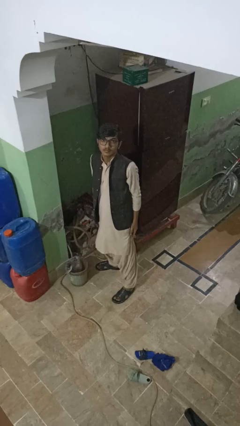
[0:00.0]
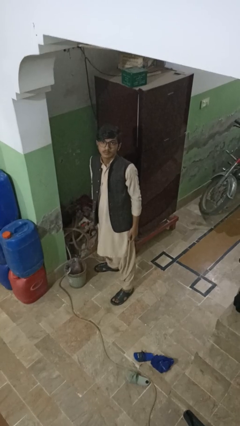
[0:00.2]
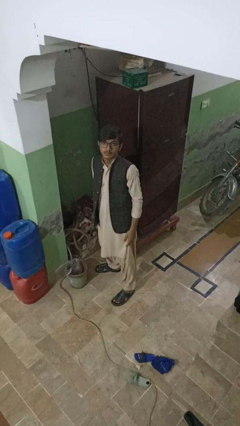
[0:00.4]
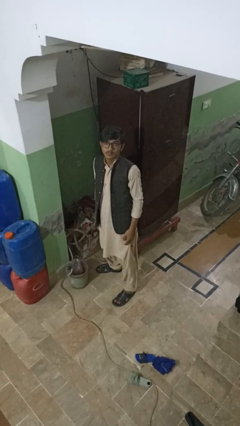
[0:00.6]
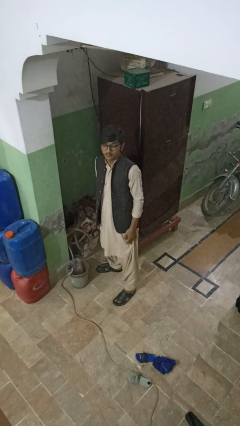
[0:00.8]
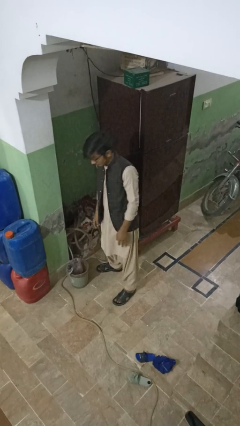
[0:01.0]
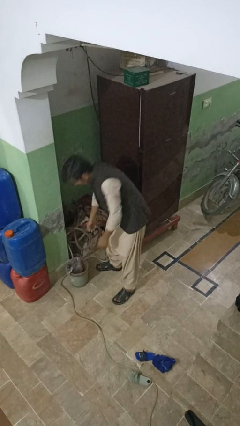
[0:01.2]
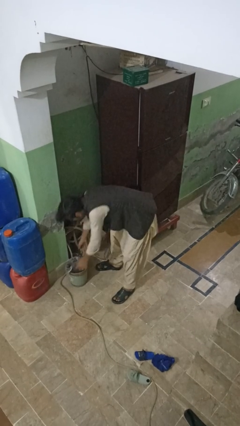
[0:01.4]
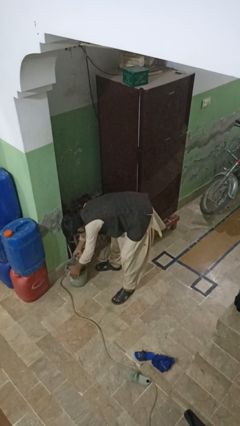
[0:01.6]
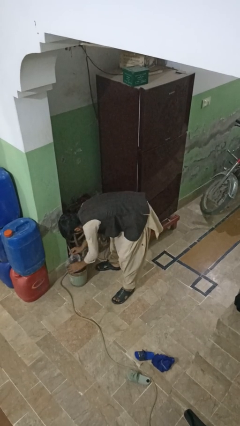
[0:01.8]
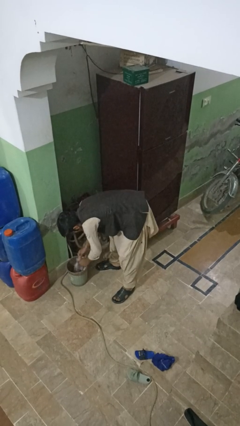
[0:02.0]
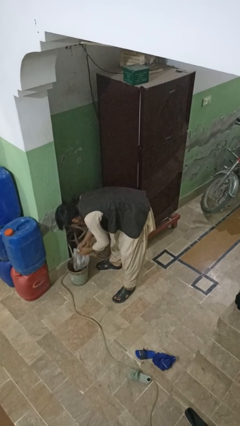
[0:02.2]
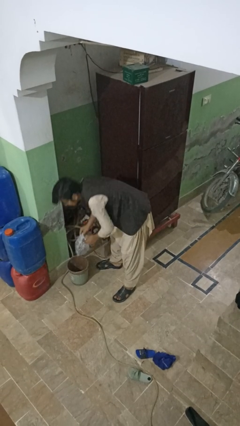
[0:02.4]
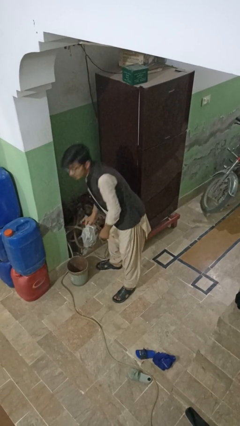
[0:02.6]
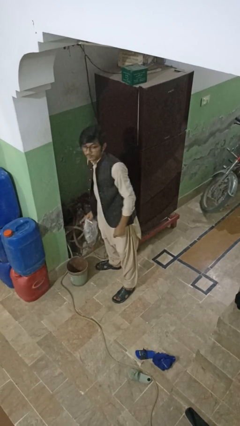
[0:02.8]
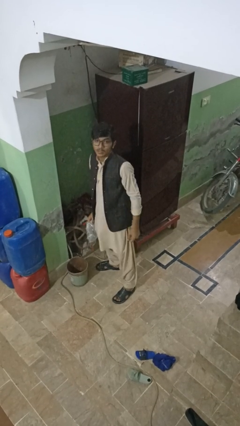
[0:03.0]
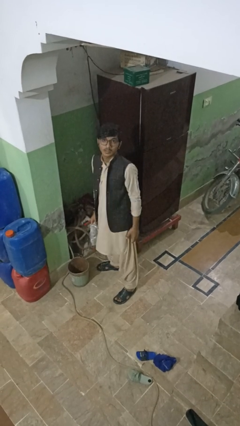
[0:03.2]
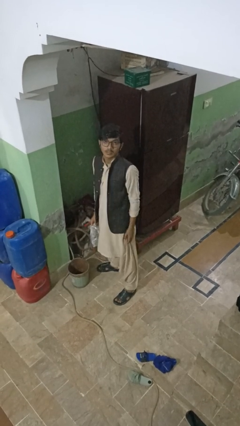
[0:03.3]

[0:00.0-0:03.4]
person removes trashbag from trashcan

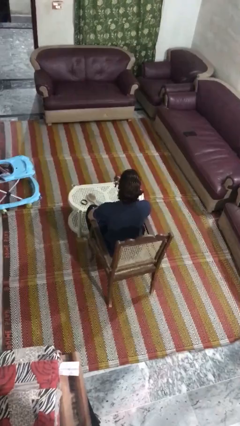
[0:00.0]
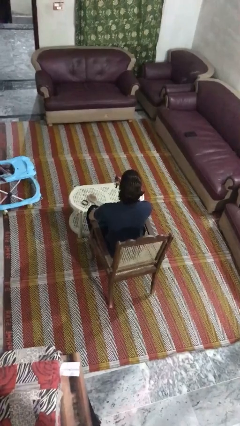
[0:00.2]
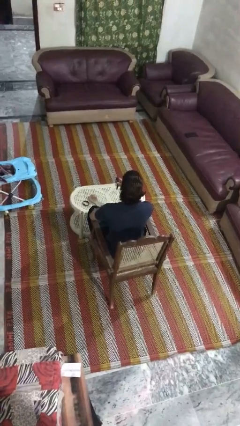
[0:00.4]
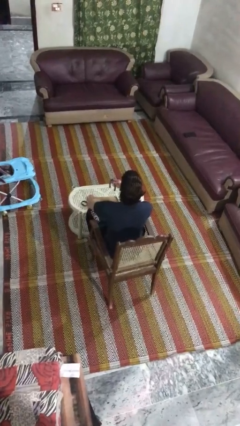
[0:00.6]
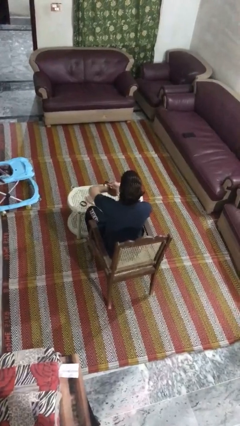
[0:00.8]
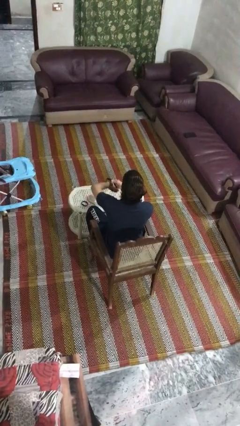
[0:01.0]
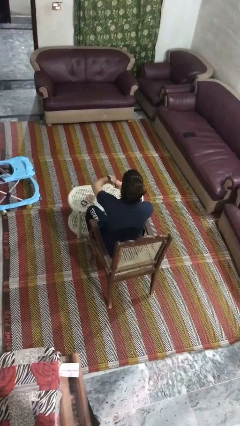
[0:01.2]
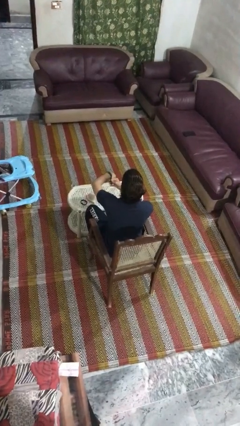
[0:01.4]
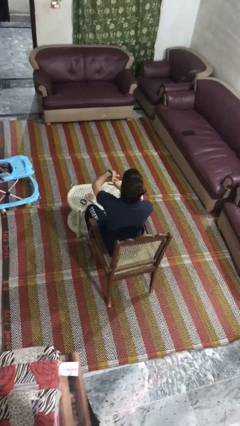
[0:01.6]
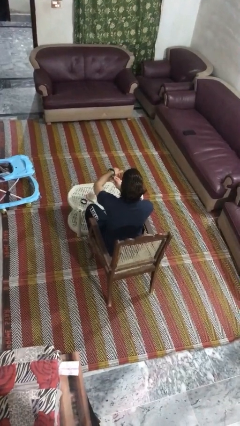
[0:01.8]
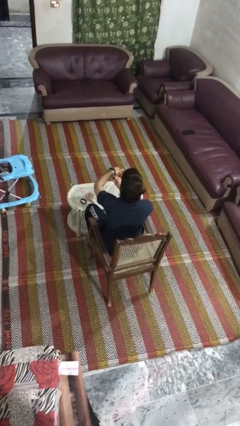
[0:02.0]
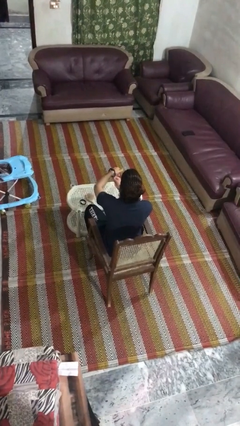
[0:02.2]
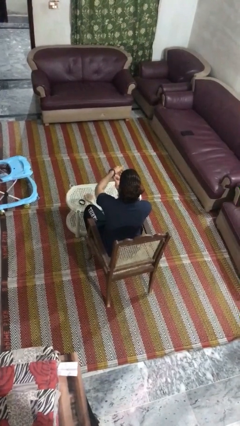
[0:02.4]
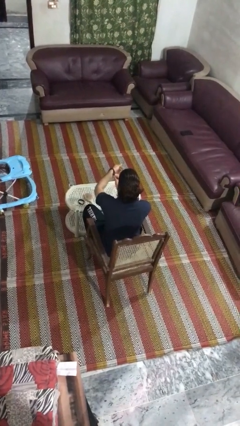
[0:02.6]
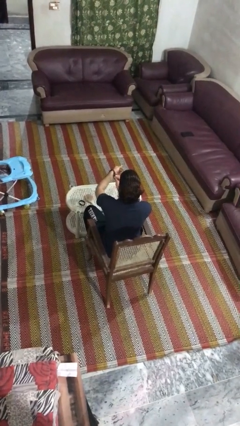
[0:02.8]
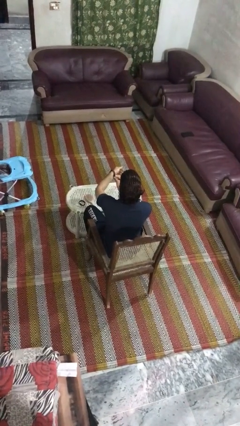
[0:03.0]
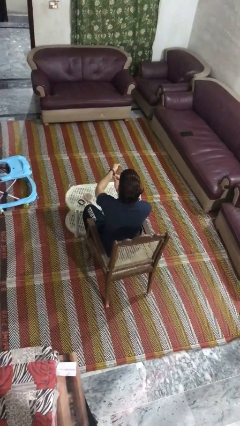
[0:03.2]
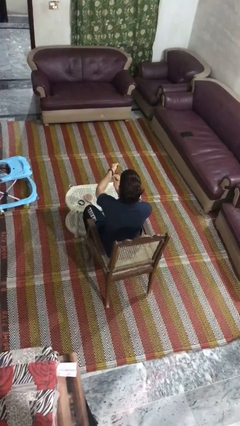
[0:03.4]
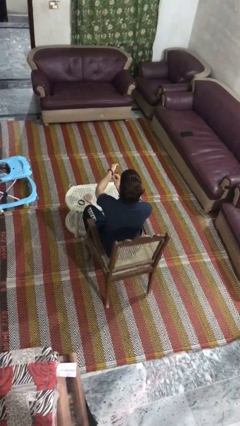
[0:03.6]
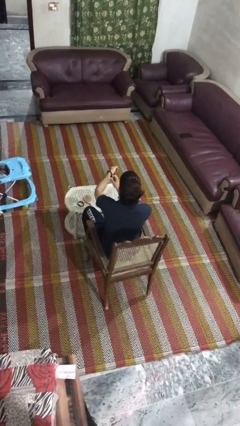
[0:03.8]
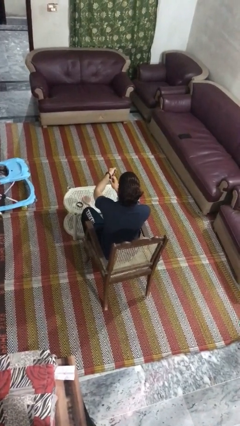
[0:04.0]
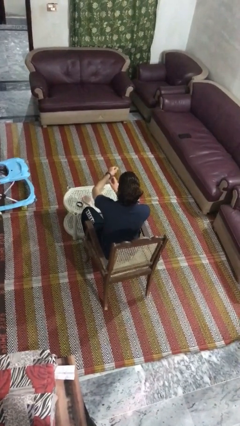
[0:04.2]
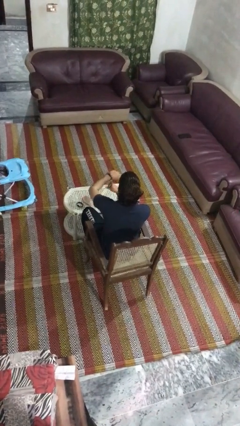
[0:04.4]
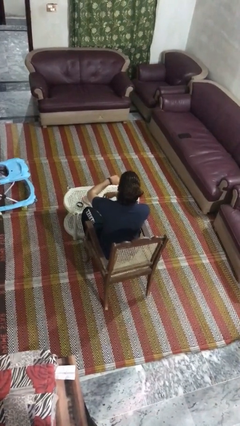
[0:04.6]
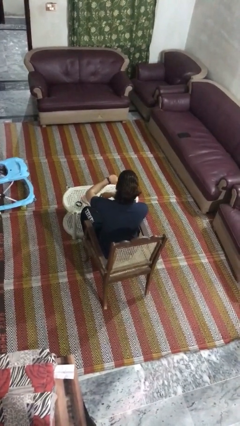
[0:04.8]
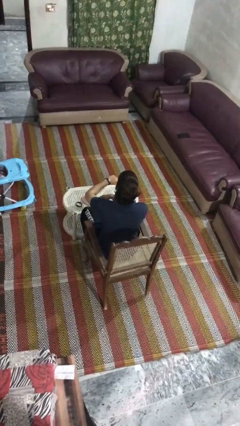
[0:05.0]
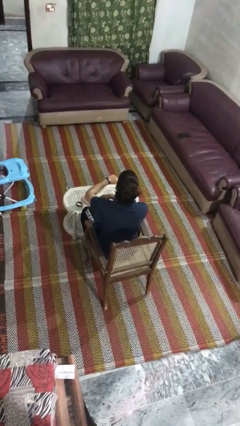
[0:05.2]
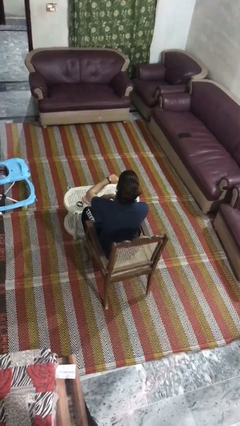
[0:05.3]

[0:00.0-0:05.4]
person puts on wristwatch

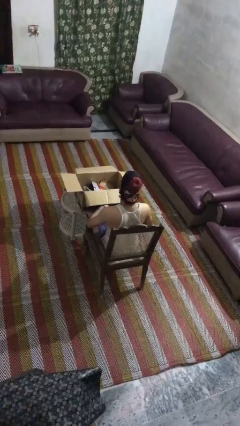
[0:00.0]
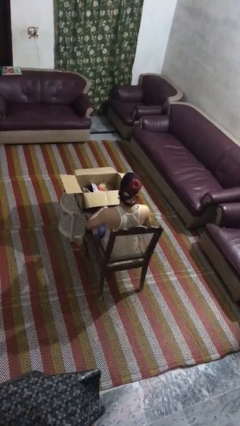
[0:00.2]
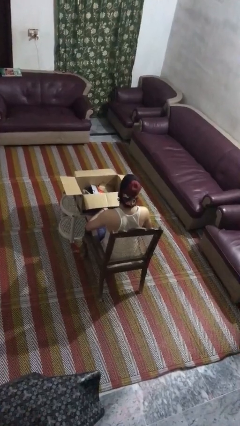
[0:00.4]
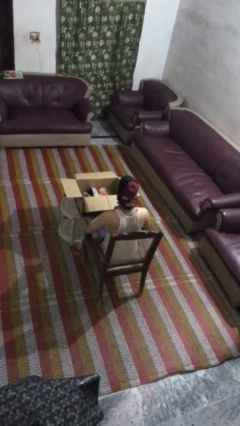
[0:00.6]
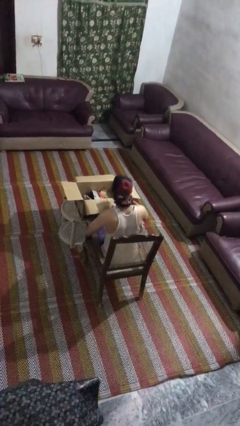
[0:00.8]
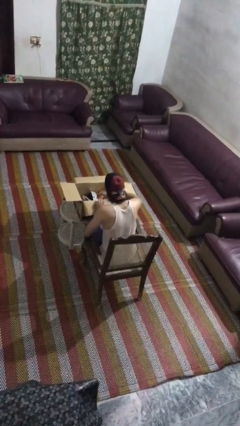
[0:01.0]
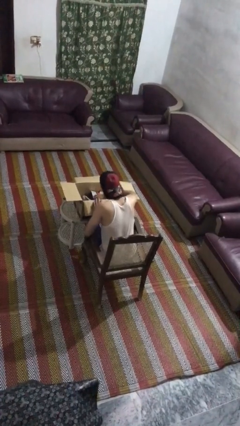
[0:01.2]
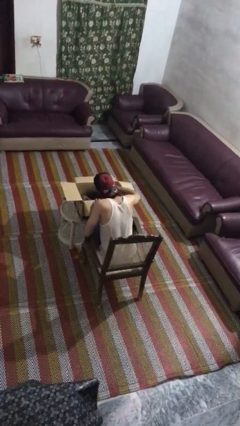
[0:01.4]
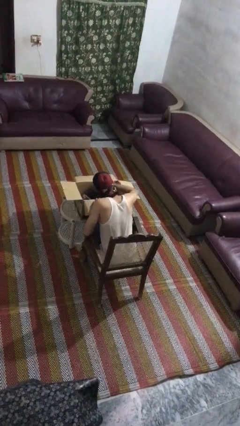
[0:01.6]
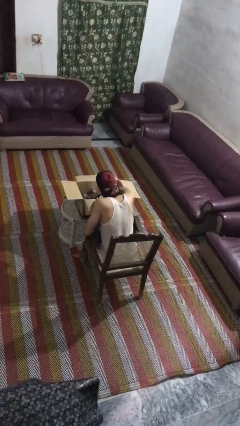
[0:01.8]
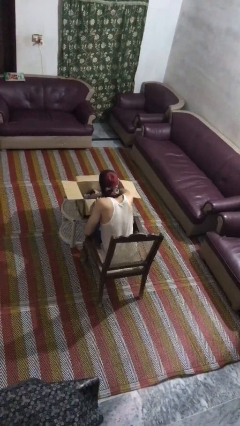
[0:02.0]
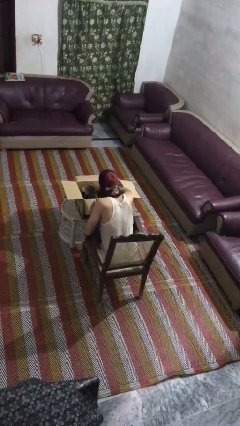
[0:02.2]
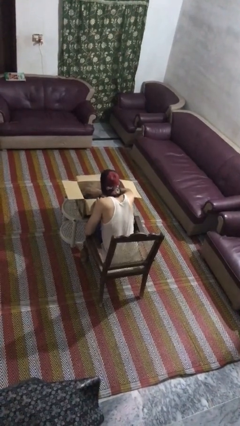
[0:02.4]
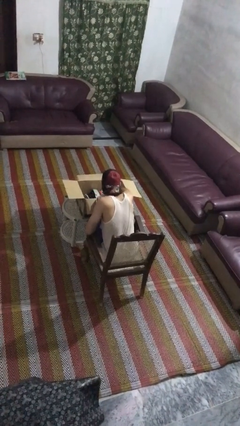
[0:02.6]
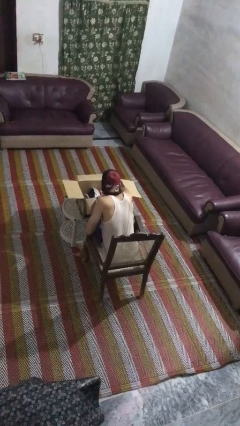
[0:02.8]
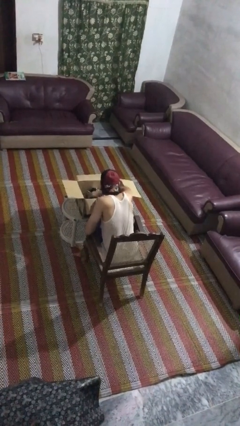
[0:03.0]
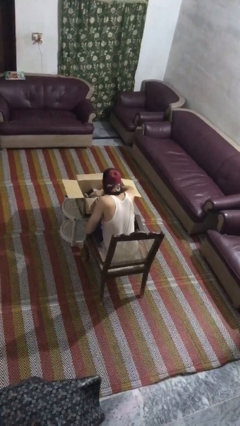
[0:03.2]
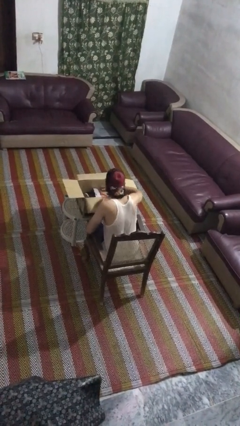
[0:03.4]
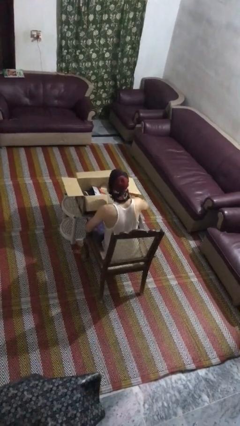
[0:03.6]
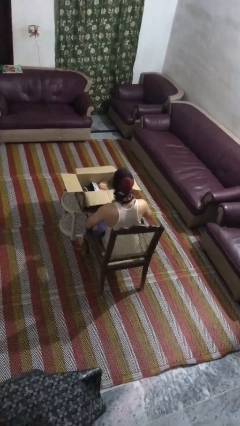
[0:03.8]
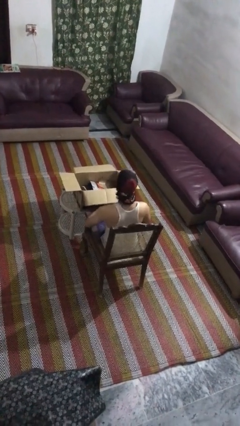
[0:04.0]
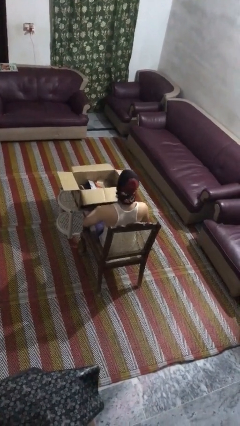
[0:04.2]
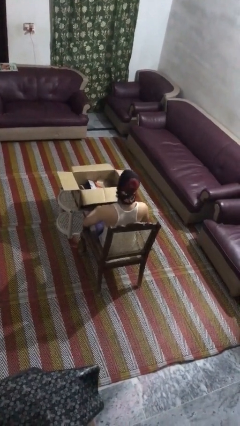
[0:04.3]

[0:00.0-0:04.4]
person searches in box

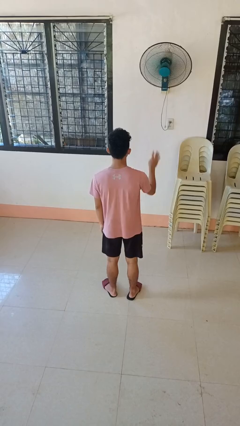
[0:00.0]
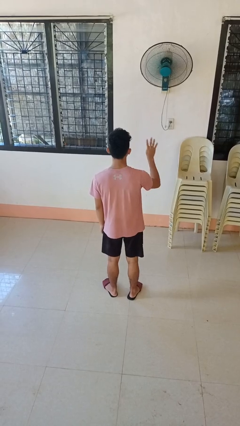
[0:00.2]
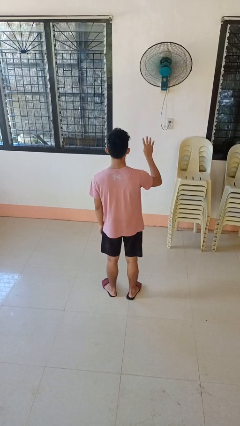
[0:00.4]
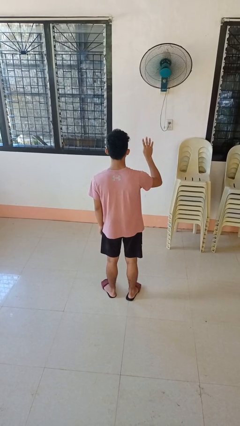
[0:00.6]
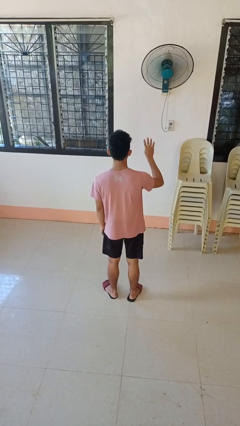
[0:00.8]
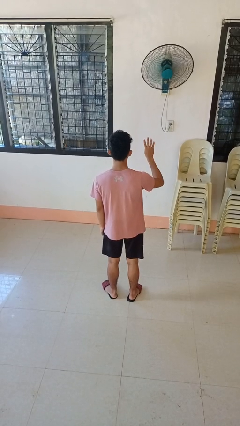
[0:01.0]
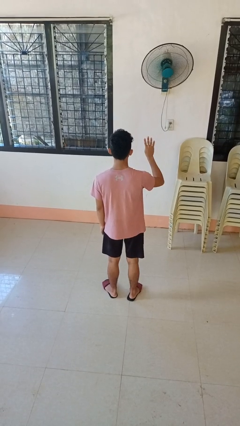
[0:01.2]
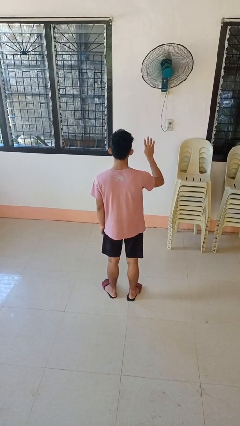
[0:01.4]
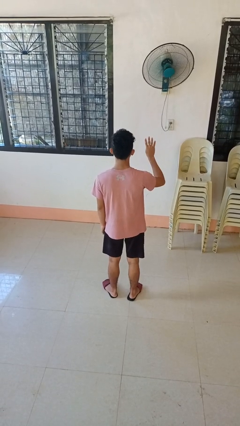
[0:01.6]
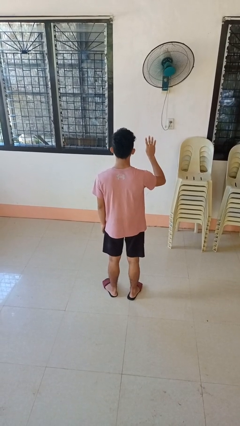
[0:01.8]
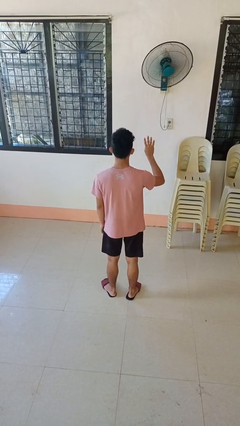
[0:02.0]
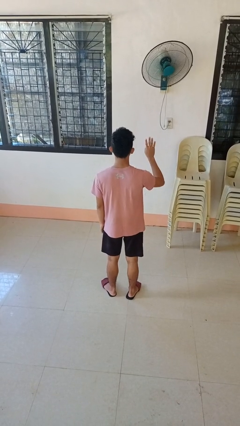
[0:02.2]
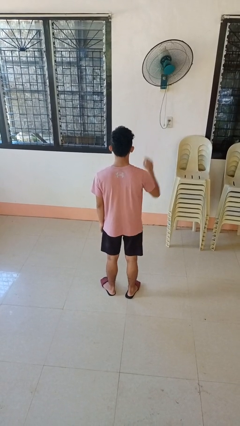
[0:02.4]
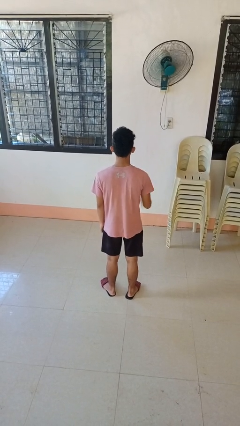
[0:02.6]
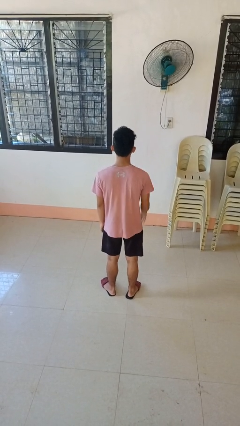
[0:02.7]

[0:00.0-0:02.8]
person gestures number four

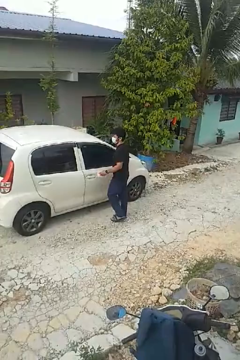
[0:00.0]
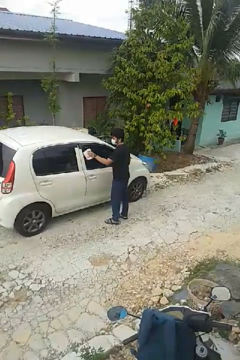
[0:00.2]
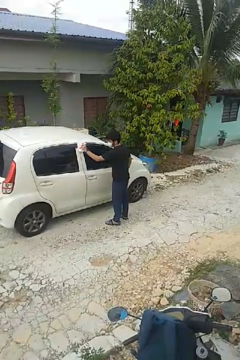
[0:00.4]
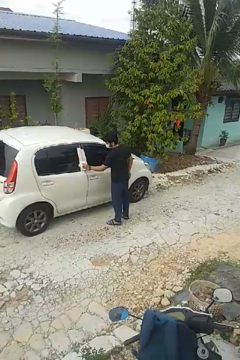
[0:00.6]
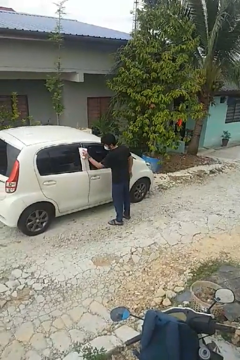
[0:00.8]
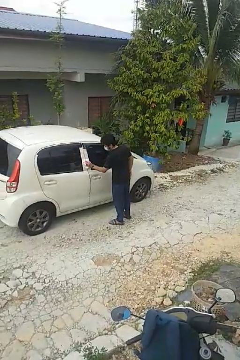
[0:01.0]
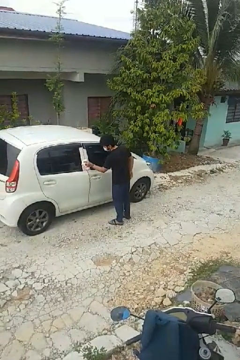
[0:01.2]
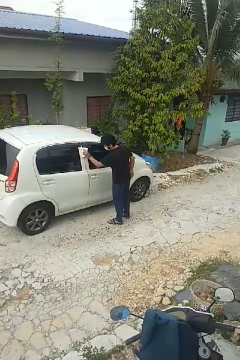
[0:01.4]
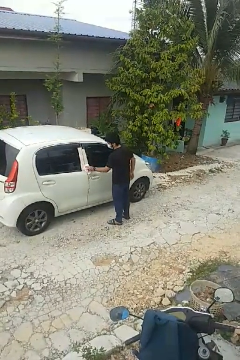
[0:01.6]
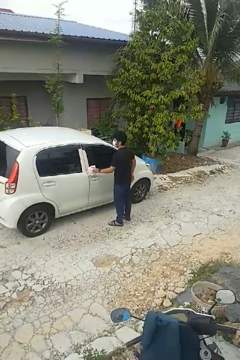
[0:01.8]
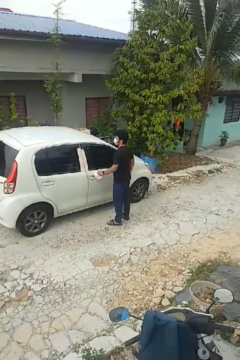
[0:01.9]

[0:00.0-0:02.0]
person polishes car with rag
